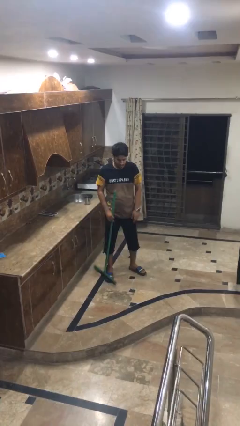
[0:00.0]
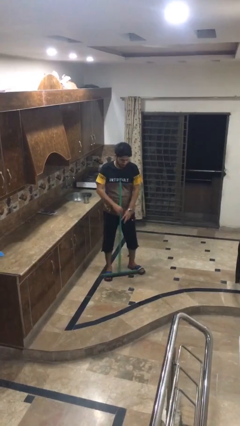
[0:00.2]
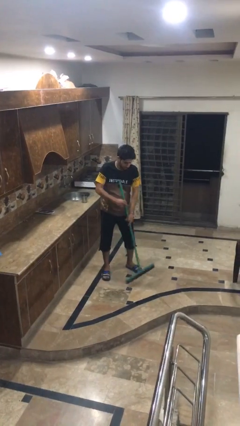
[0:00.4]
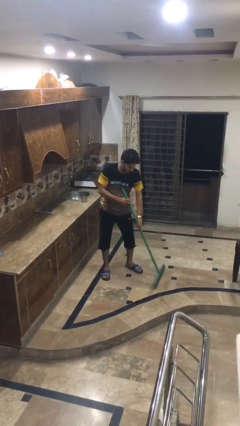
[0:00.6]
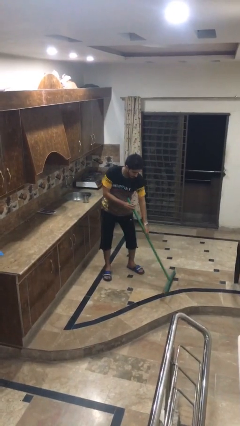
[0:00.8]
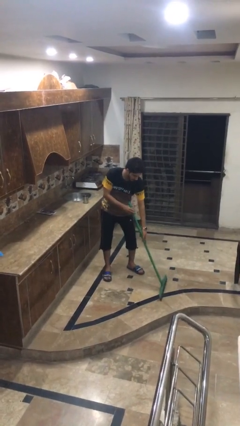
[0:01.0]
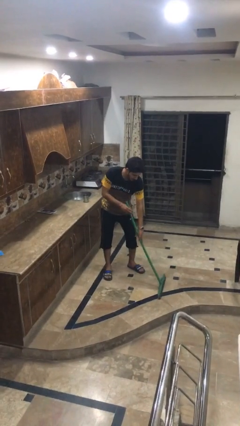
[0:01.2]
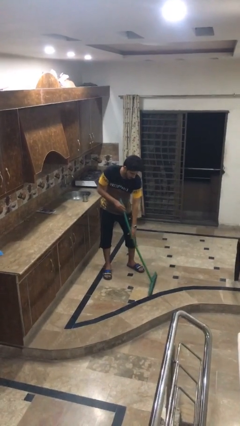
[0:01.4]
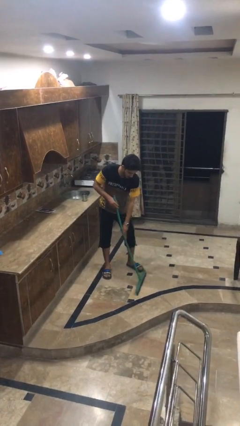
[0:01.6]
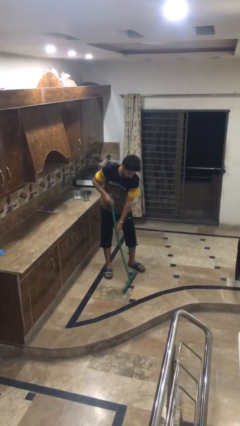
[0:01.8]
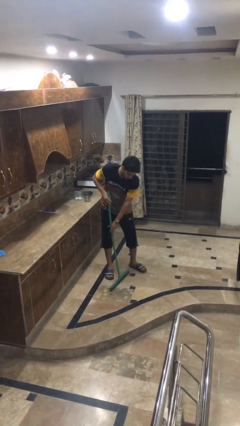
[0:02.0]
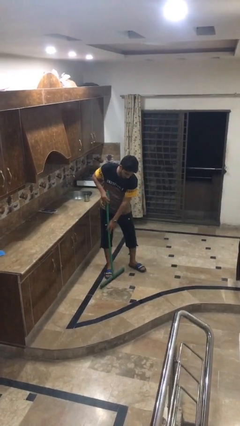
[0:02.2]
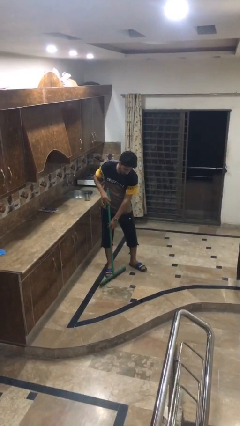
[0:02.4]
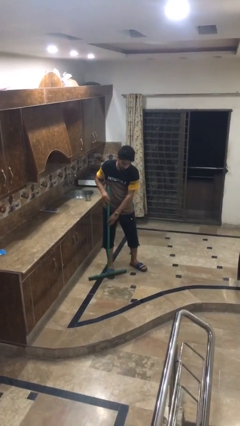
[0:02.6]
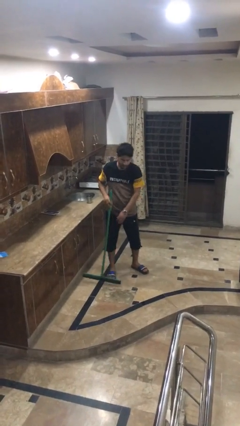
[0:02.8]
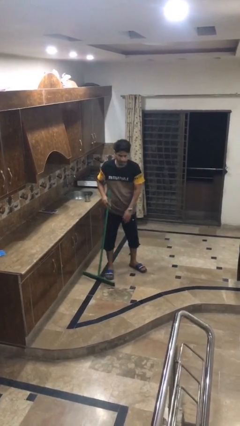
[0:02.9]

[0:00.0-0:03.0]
person mops

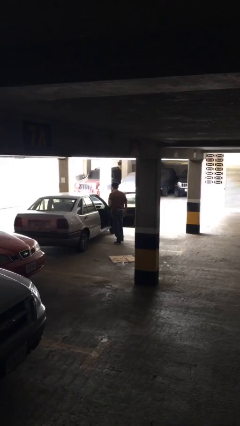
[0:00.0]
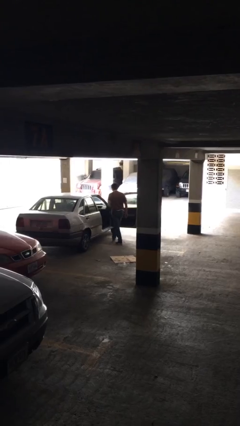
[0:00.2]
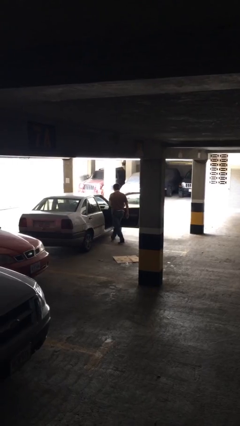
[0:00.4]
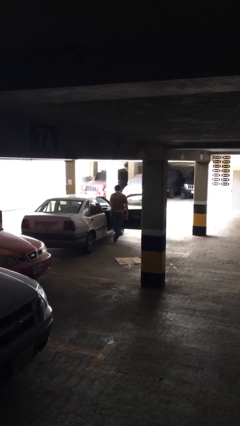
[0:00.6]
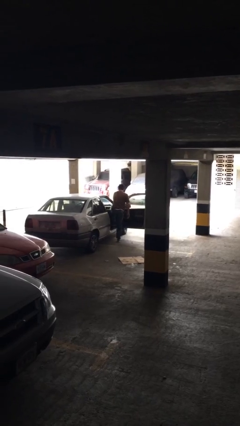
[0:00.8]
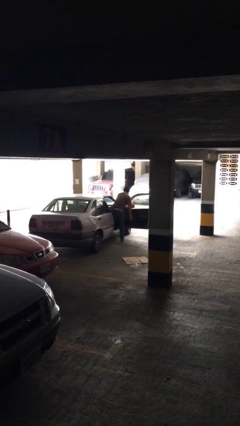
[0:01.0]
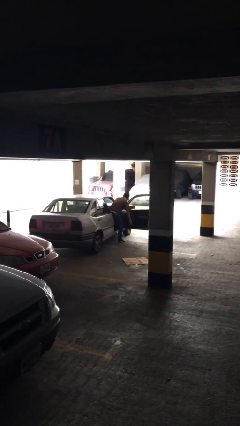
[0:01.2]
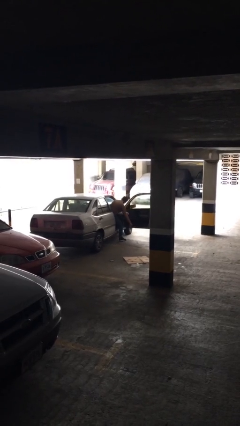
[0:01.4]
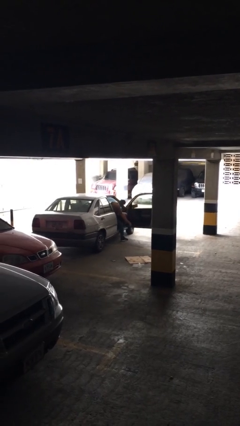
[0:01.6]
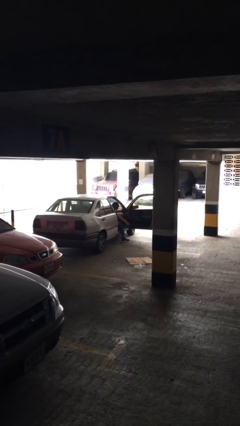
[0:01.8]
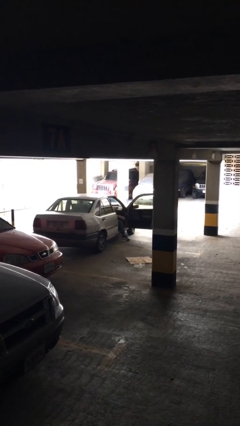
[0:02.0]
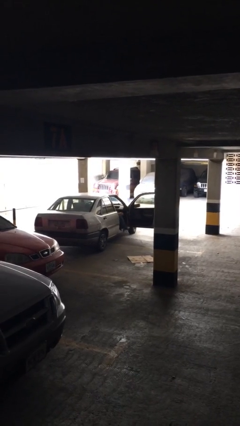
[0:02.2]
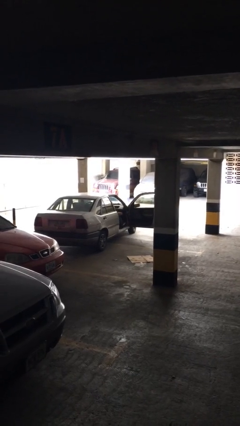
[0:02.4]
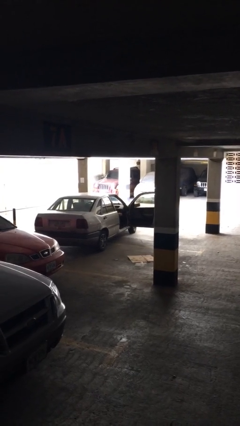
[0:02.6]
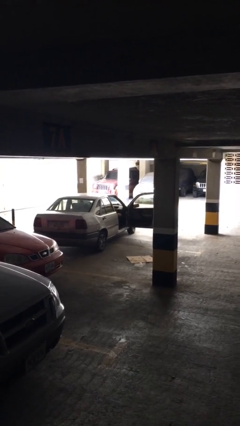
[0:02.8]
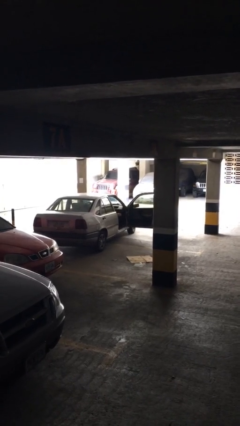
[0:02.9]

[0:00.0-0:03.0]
person enters car

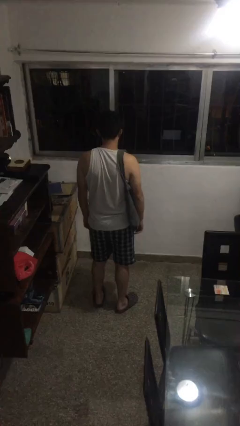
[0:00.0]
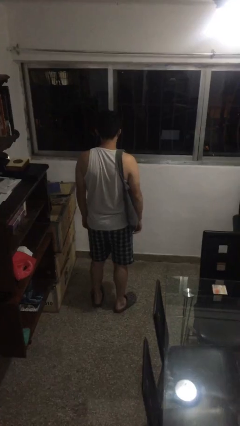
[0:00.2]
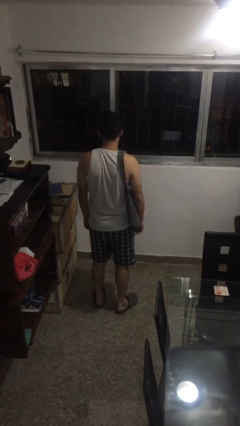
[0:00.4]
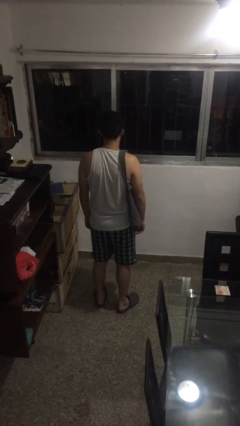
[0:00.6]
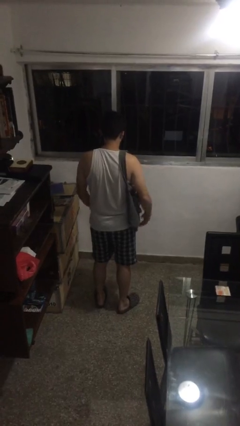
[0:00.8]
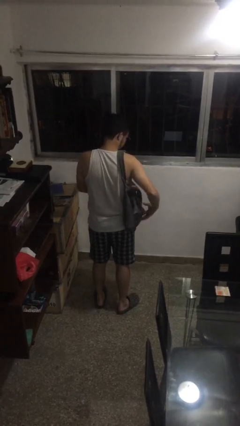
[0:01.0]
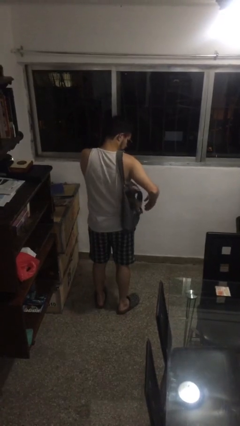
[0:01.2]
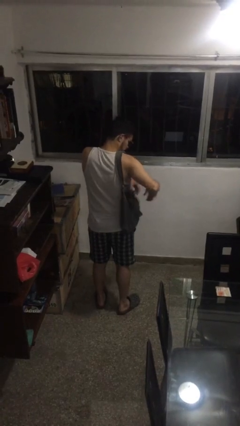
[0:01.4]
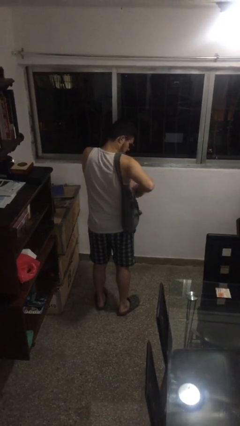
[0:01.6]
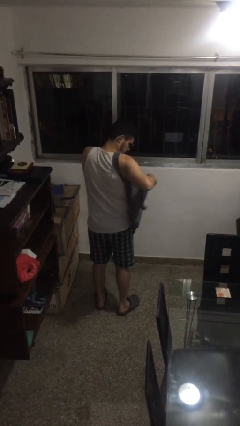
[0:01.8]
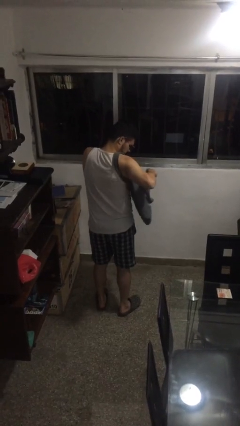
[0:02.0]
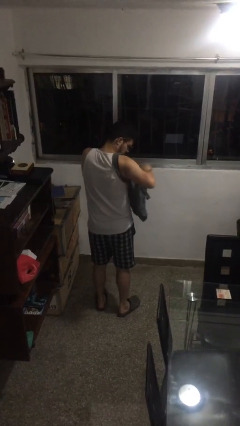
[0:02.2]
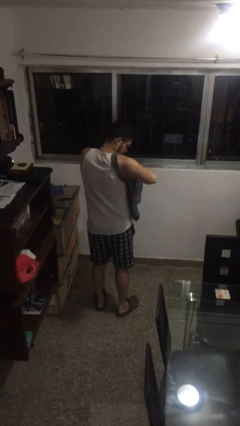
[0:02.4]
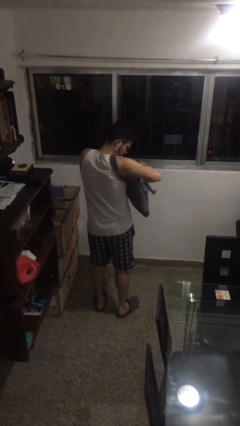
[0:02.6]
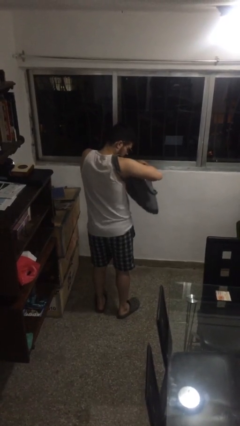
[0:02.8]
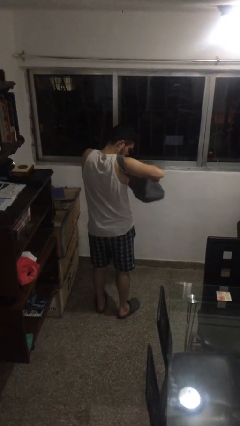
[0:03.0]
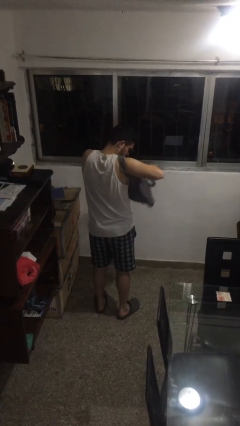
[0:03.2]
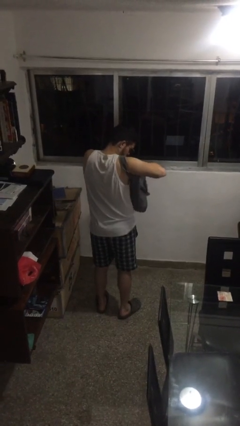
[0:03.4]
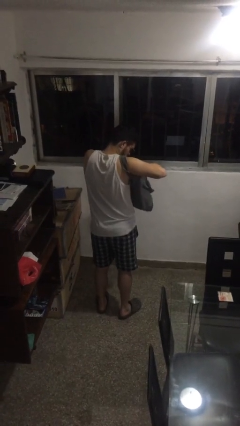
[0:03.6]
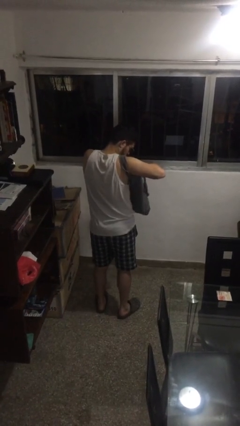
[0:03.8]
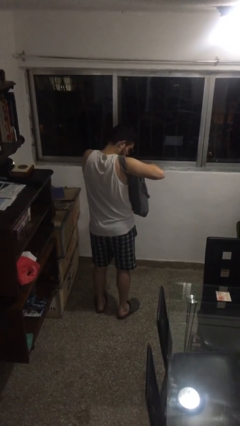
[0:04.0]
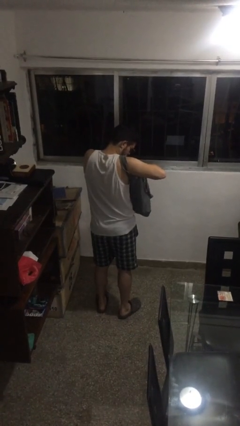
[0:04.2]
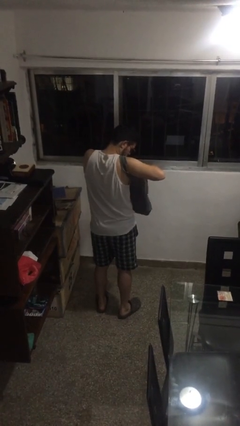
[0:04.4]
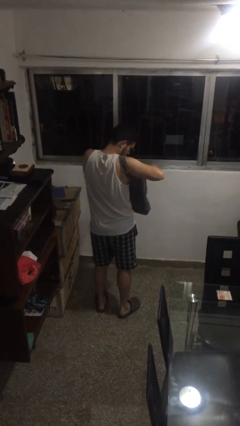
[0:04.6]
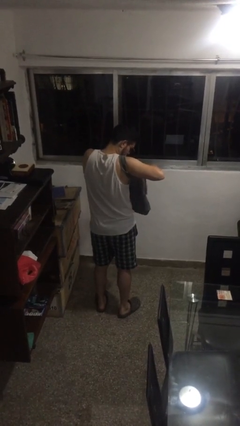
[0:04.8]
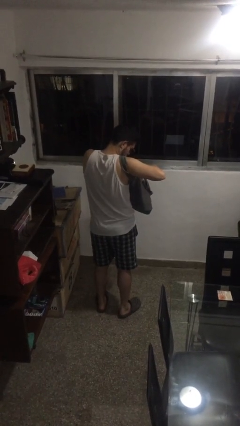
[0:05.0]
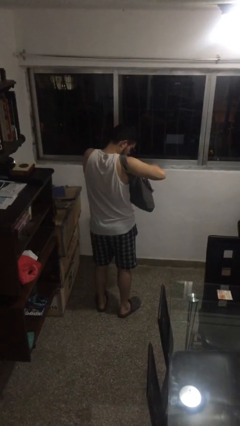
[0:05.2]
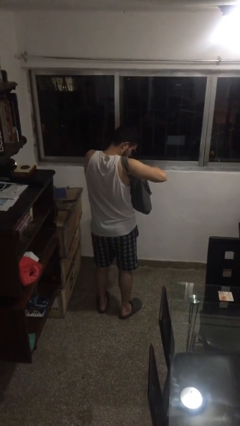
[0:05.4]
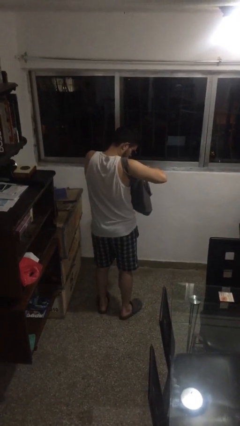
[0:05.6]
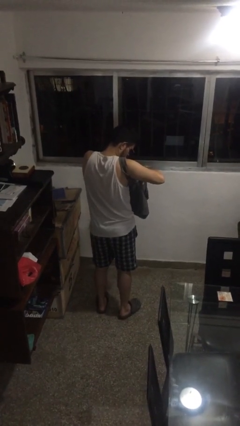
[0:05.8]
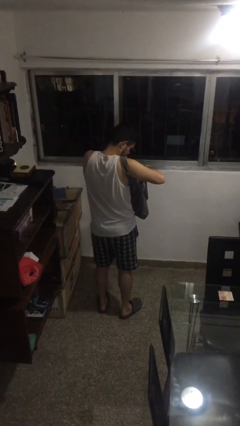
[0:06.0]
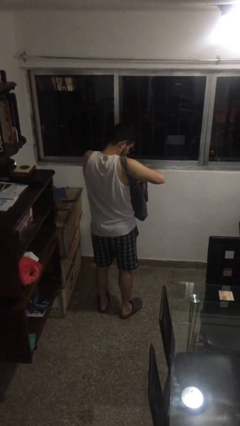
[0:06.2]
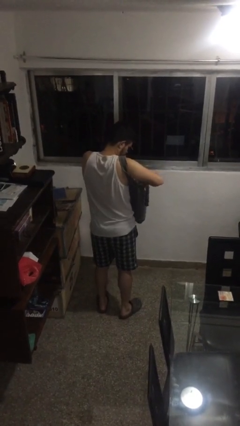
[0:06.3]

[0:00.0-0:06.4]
person searches in purse

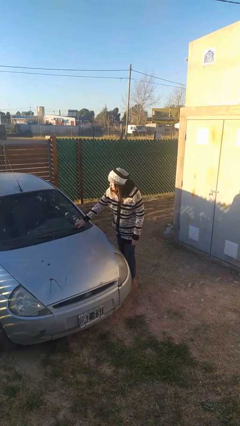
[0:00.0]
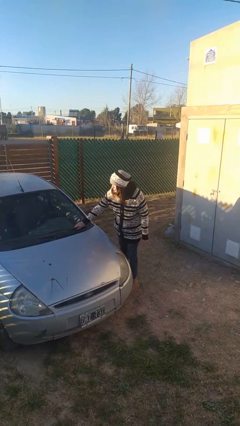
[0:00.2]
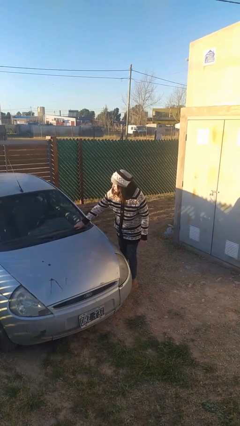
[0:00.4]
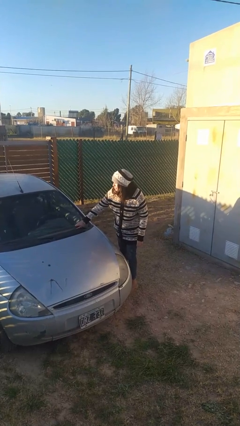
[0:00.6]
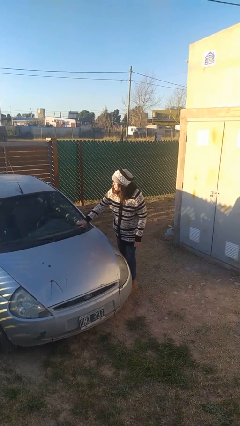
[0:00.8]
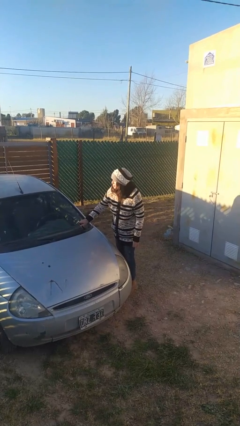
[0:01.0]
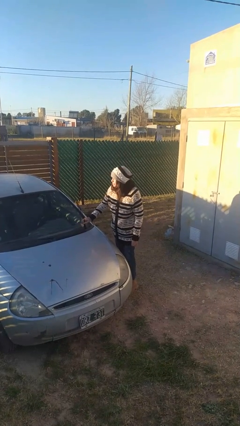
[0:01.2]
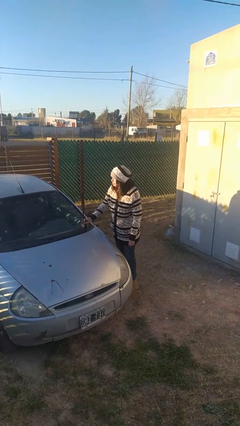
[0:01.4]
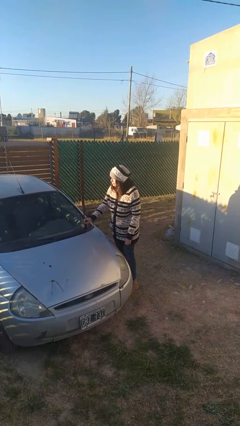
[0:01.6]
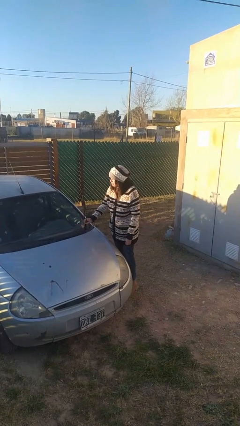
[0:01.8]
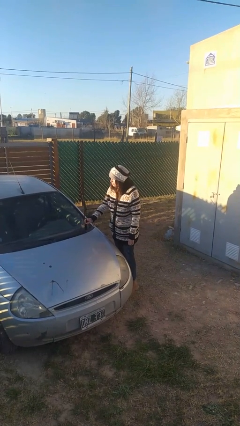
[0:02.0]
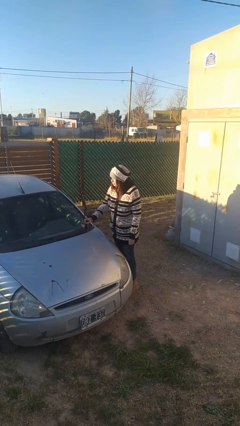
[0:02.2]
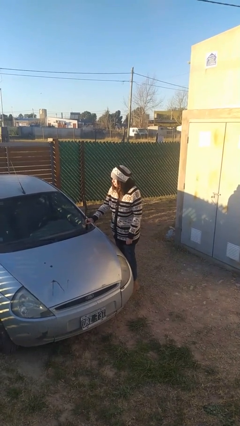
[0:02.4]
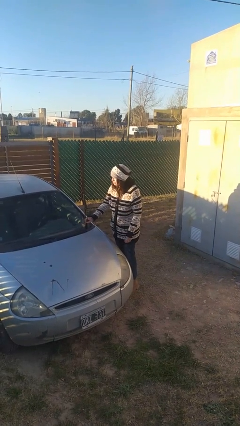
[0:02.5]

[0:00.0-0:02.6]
person flips up car wipers

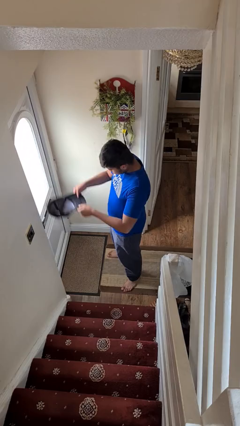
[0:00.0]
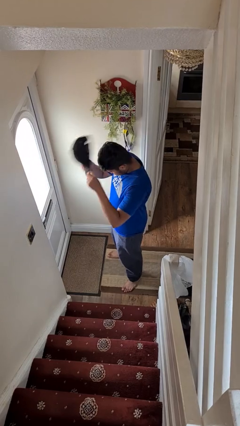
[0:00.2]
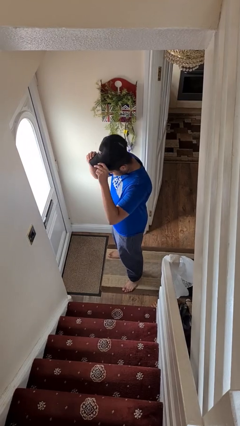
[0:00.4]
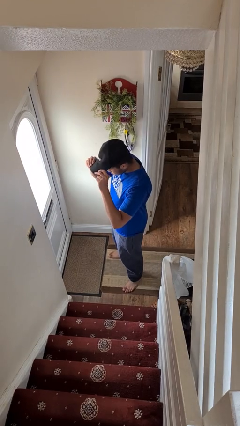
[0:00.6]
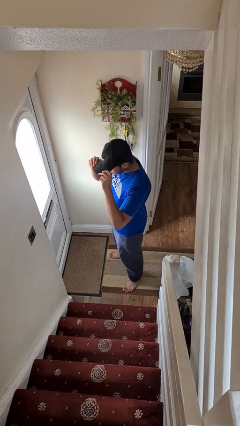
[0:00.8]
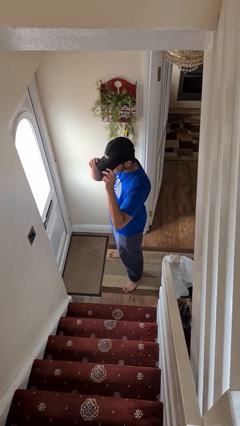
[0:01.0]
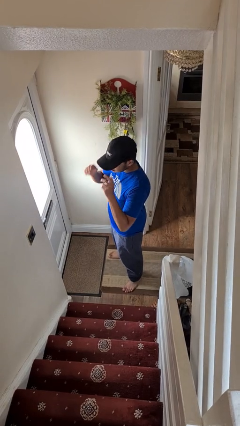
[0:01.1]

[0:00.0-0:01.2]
person puts on hat

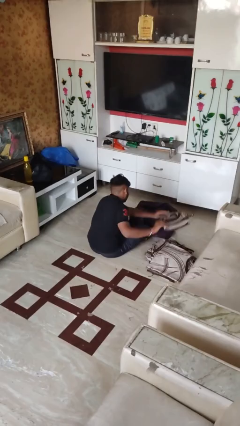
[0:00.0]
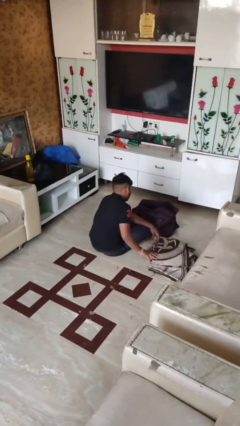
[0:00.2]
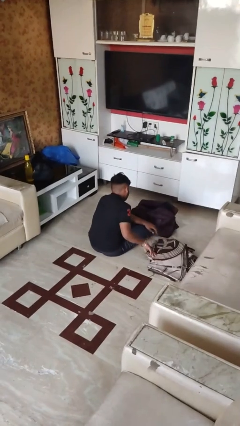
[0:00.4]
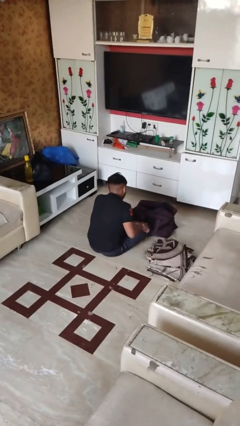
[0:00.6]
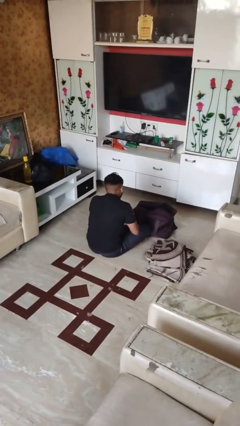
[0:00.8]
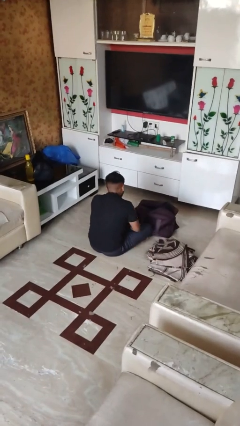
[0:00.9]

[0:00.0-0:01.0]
person unloads clothes from suitcase

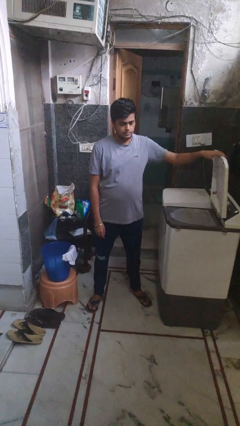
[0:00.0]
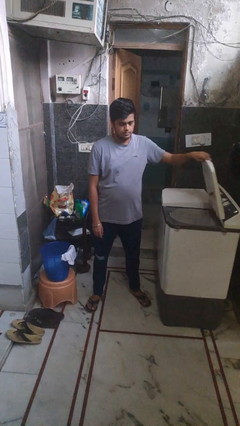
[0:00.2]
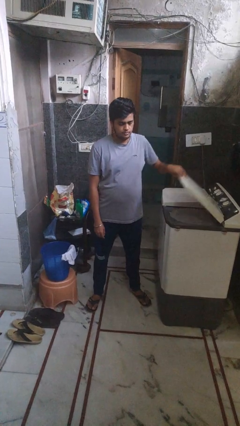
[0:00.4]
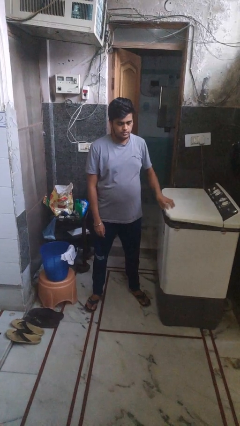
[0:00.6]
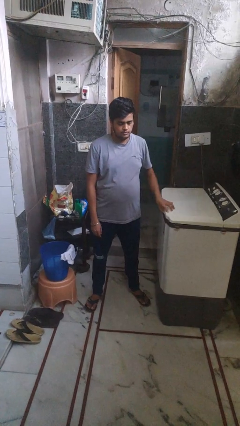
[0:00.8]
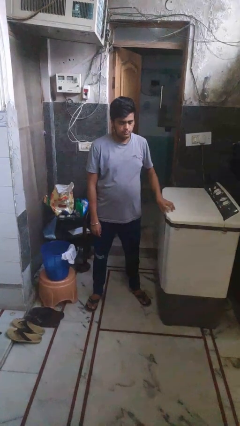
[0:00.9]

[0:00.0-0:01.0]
person closes clothes washer
